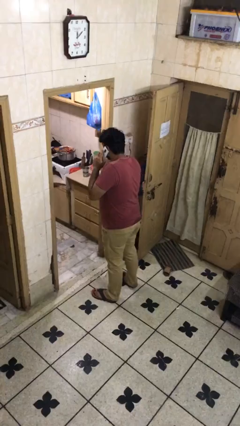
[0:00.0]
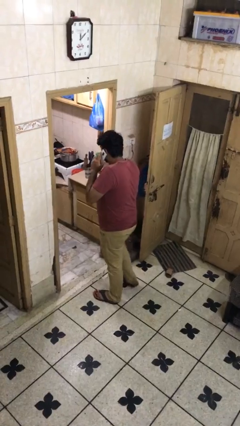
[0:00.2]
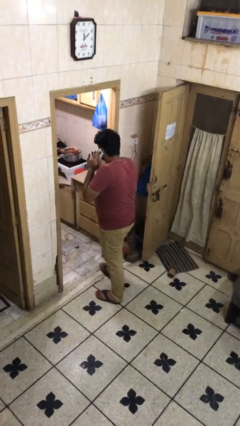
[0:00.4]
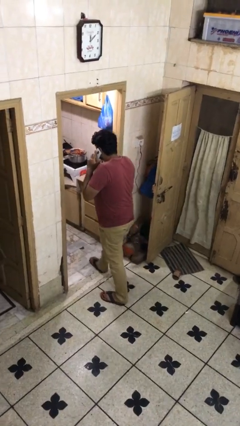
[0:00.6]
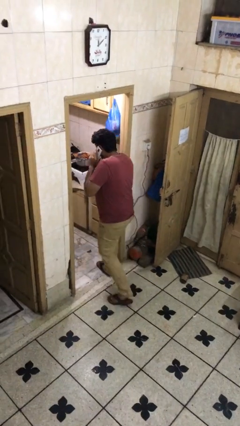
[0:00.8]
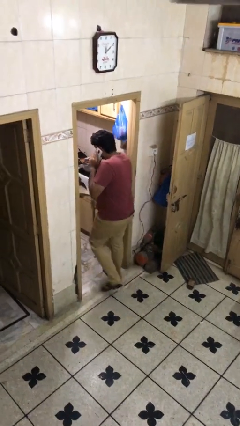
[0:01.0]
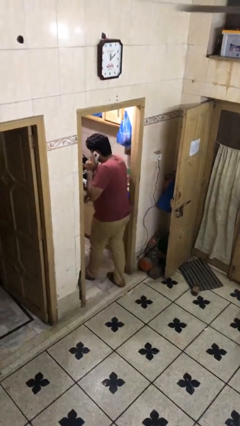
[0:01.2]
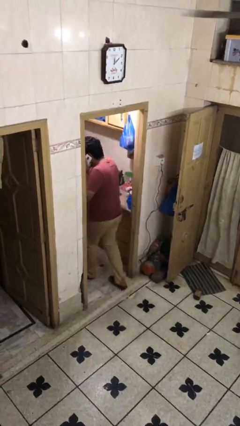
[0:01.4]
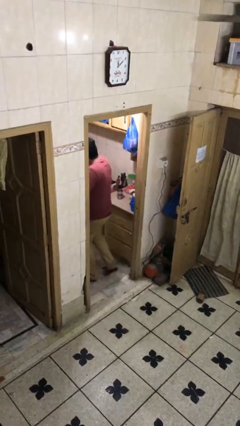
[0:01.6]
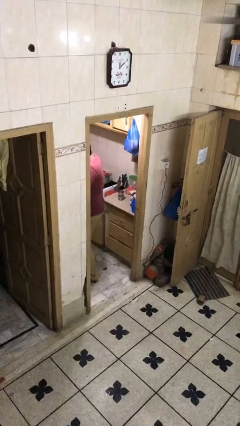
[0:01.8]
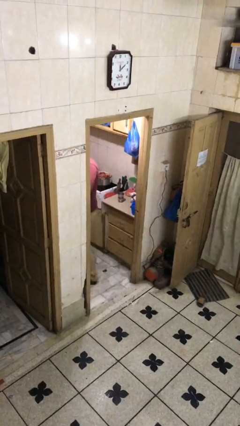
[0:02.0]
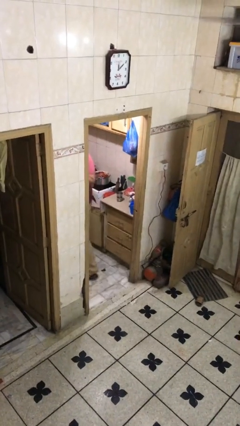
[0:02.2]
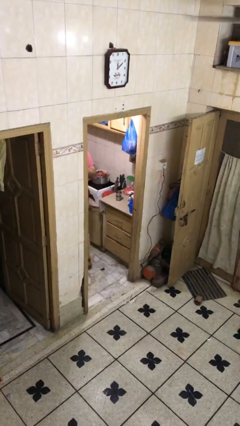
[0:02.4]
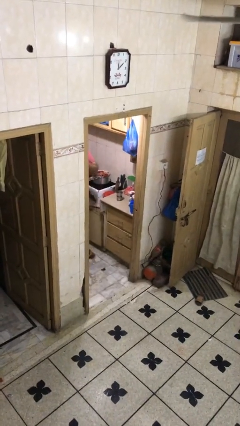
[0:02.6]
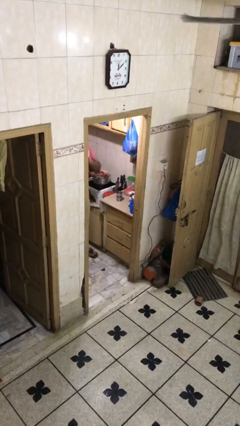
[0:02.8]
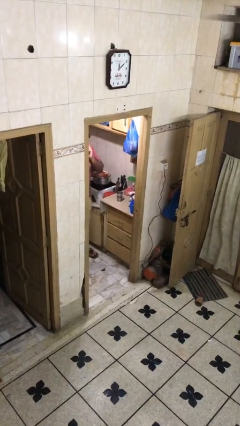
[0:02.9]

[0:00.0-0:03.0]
person exits scene through structure

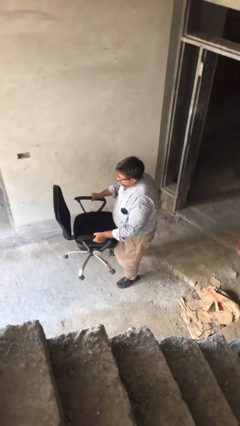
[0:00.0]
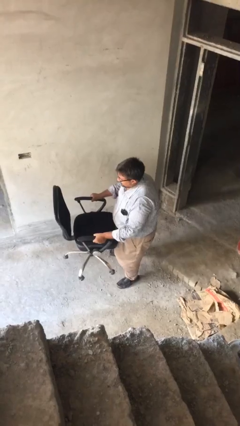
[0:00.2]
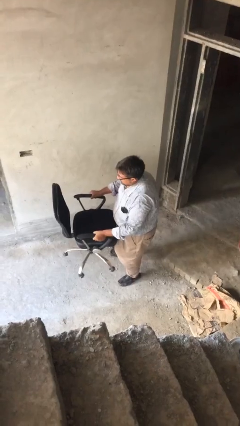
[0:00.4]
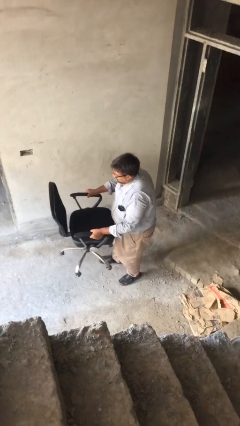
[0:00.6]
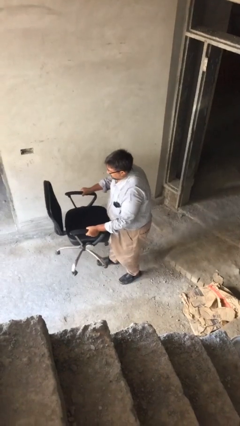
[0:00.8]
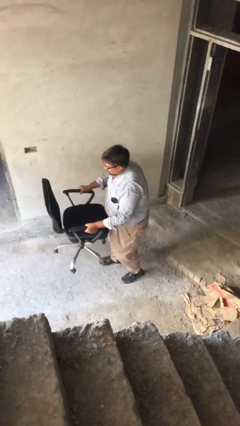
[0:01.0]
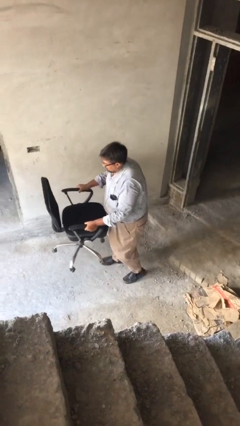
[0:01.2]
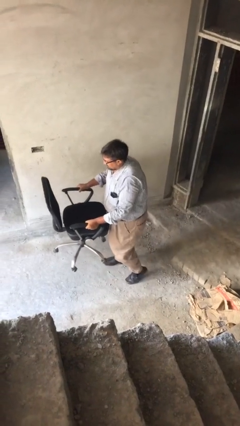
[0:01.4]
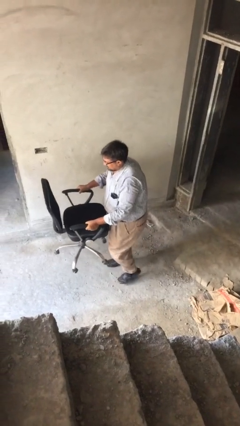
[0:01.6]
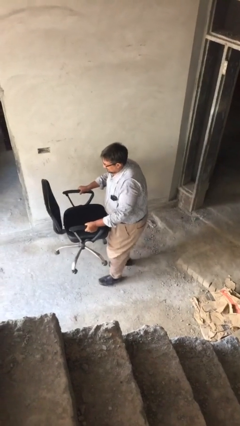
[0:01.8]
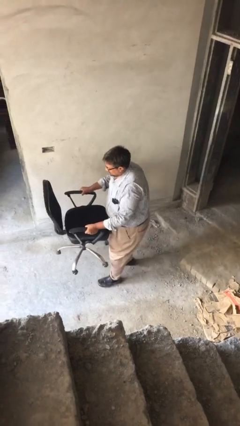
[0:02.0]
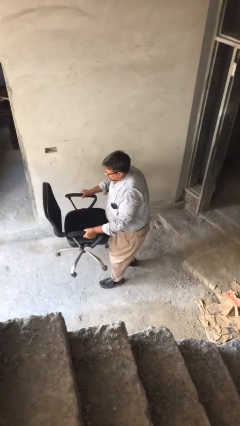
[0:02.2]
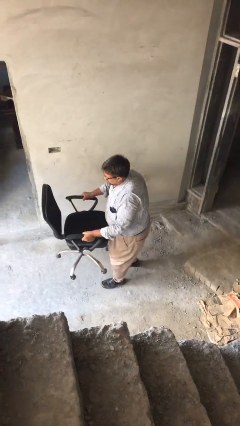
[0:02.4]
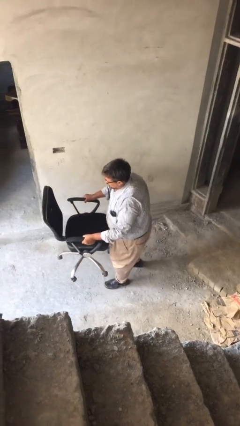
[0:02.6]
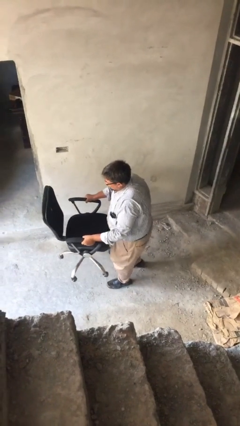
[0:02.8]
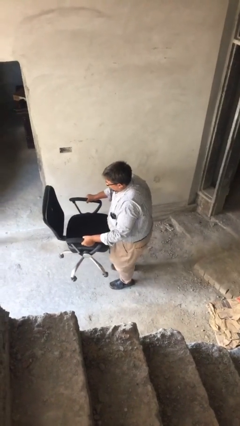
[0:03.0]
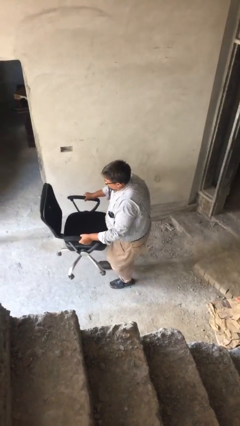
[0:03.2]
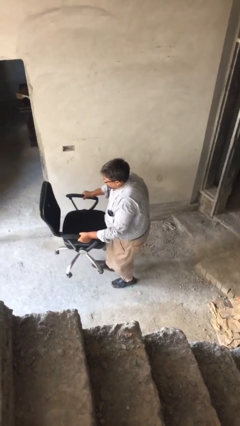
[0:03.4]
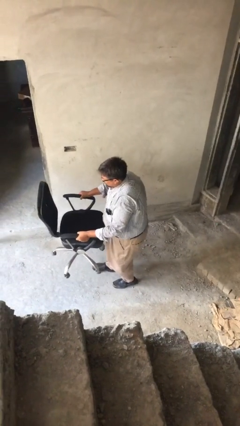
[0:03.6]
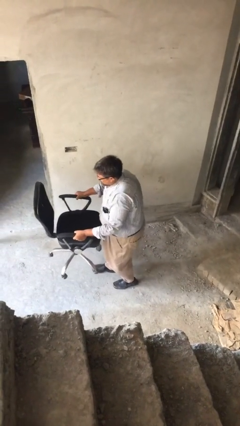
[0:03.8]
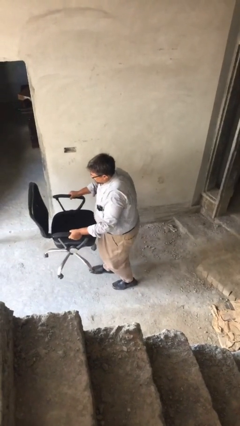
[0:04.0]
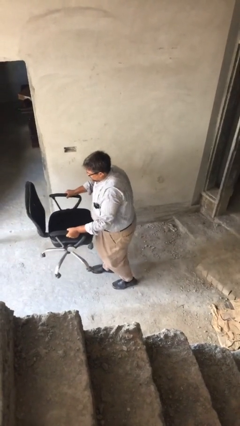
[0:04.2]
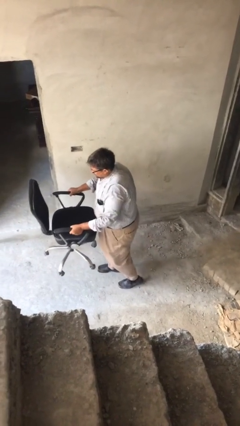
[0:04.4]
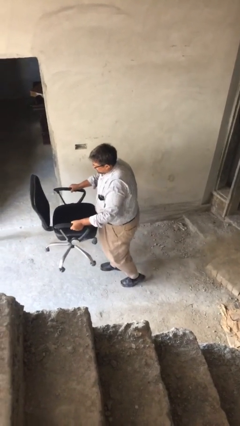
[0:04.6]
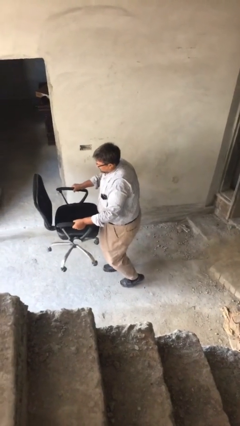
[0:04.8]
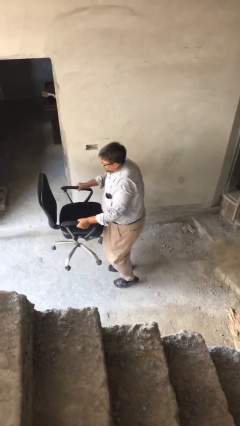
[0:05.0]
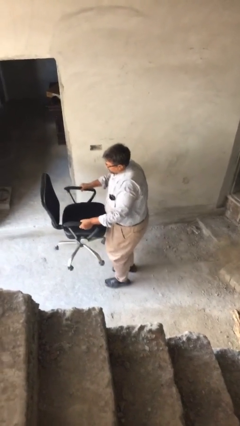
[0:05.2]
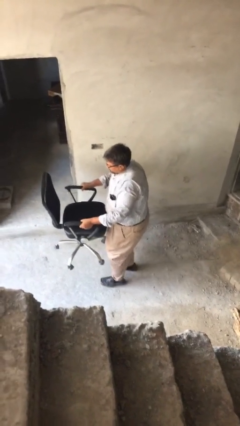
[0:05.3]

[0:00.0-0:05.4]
person carries heavy object

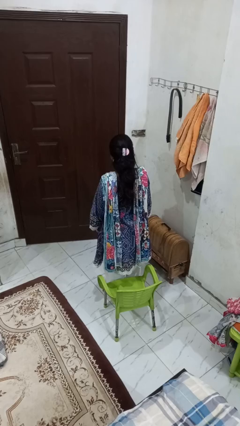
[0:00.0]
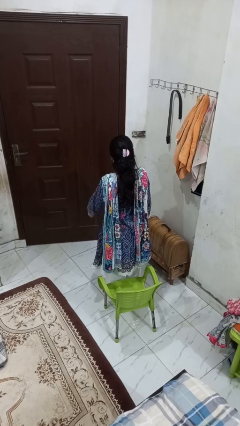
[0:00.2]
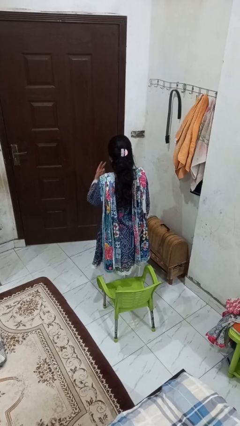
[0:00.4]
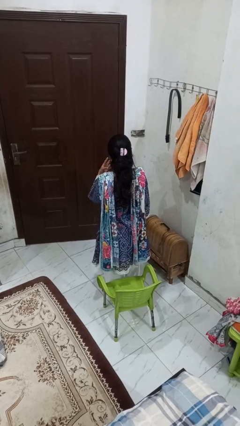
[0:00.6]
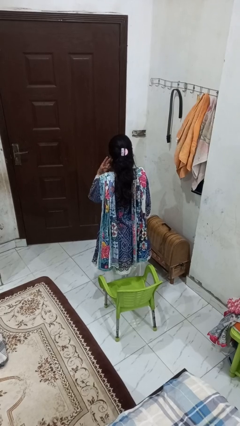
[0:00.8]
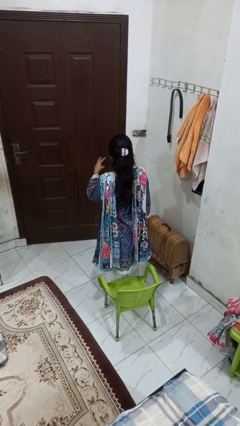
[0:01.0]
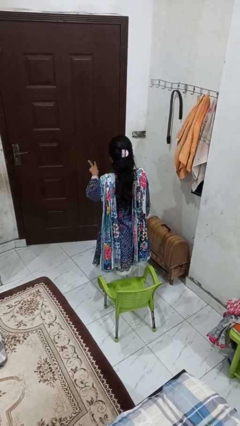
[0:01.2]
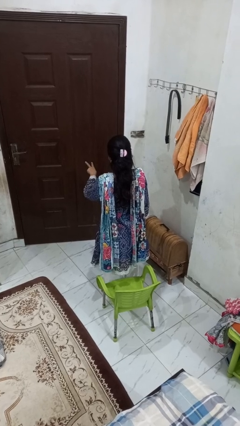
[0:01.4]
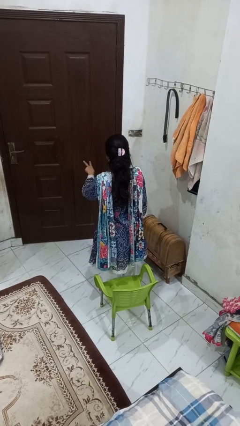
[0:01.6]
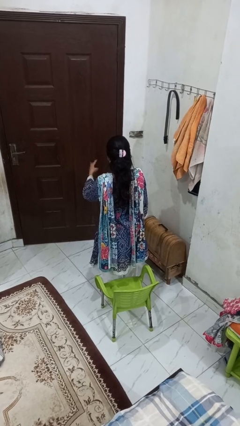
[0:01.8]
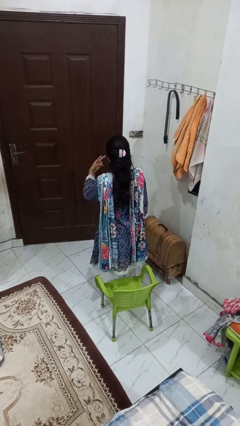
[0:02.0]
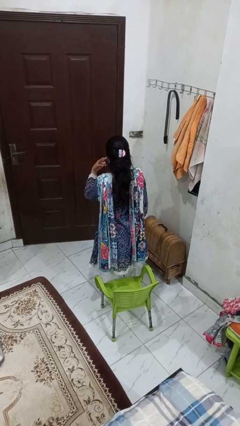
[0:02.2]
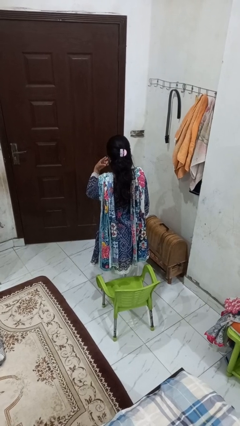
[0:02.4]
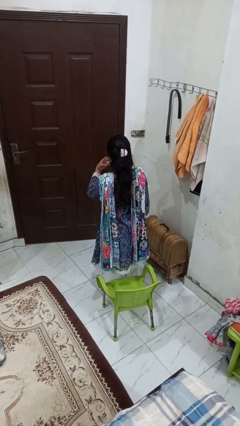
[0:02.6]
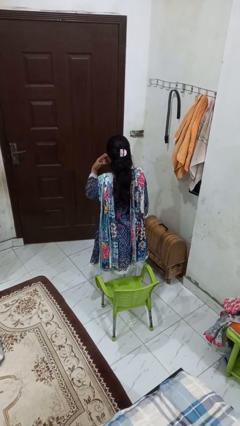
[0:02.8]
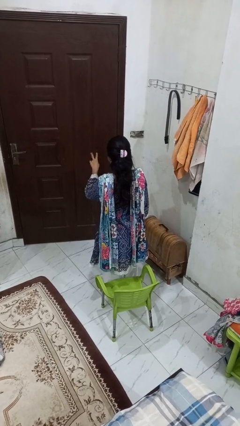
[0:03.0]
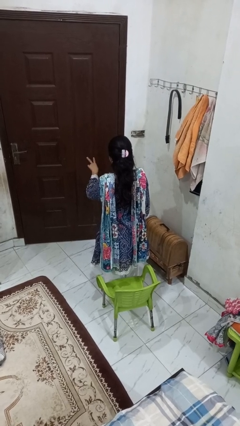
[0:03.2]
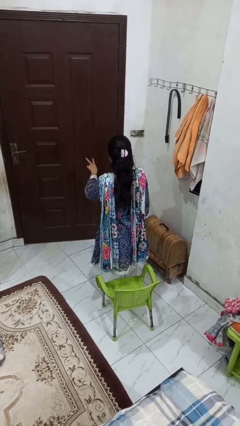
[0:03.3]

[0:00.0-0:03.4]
person gestures watch closely

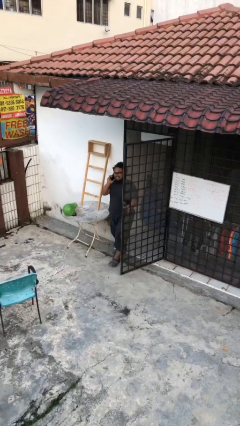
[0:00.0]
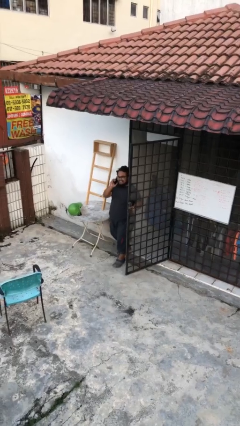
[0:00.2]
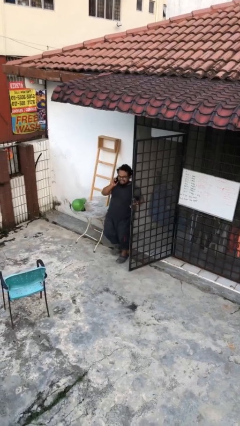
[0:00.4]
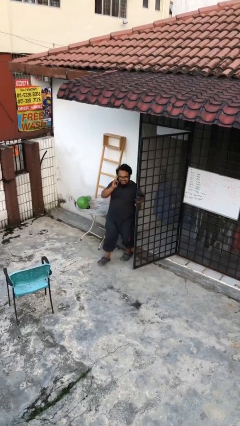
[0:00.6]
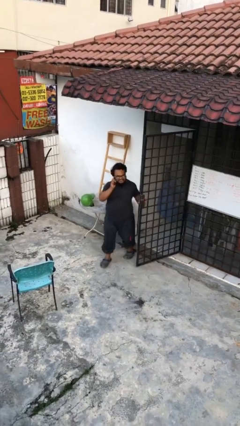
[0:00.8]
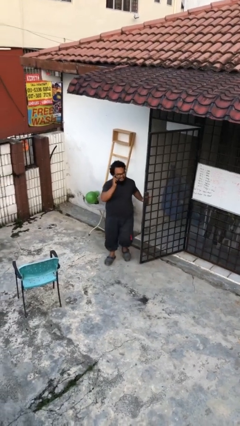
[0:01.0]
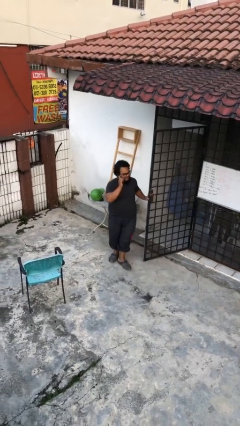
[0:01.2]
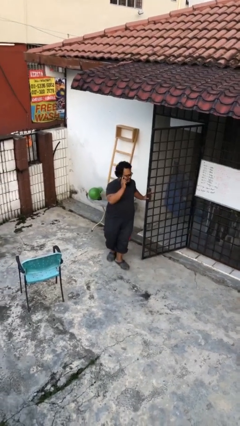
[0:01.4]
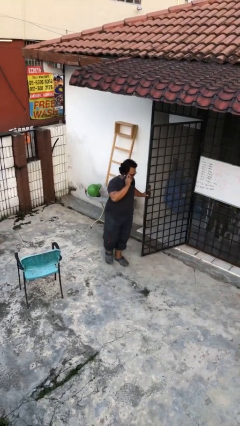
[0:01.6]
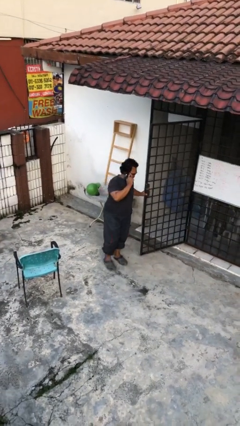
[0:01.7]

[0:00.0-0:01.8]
person enters scene through structure

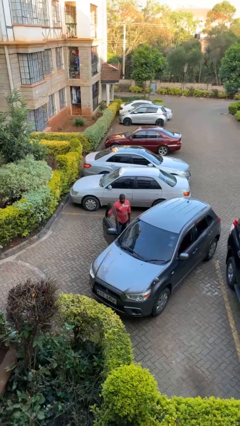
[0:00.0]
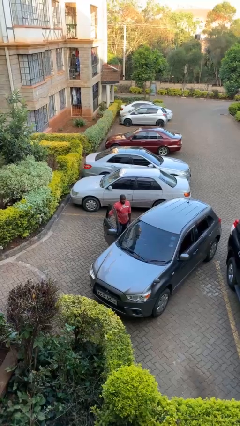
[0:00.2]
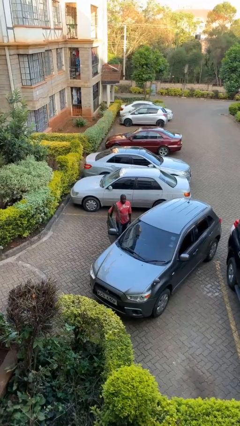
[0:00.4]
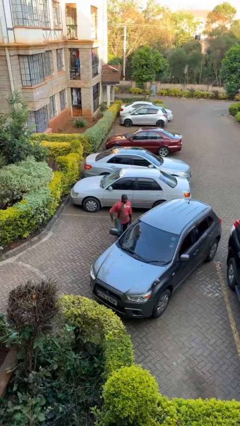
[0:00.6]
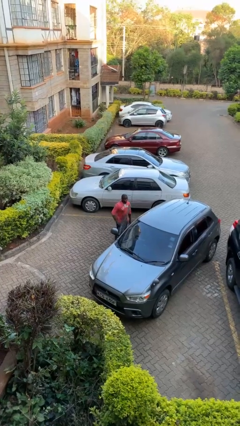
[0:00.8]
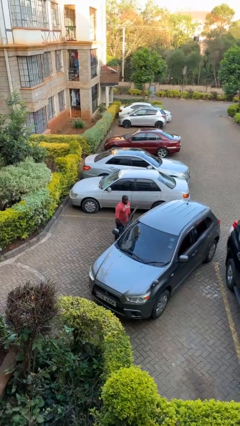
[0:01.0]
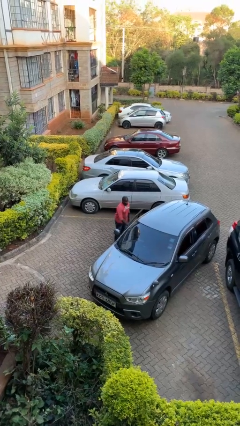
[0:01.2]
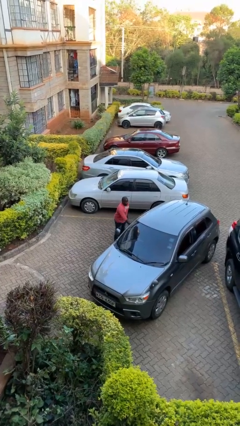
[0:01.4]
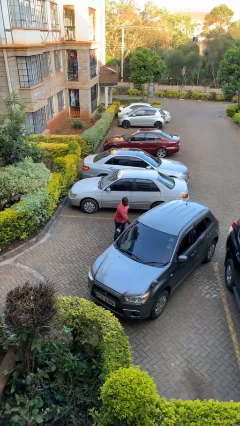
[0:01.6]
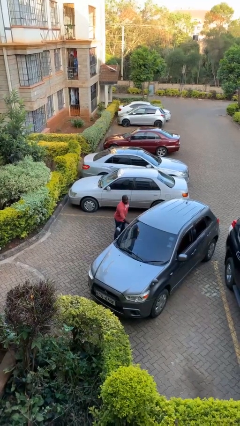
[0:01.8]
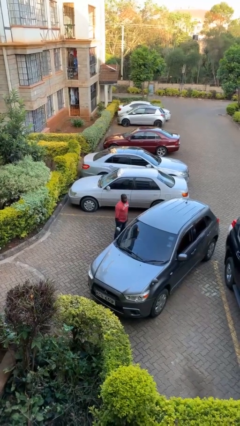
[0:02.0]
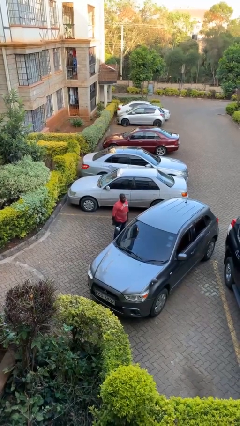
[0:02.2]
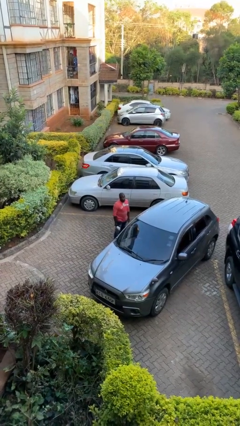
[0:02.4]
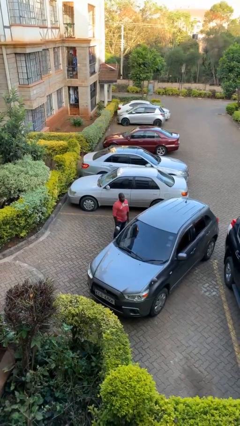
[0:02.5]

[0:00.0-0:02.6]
person closes car door

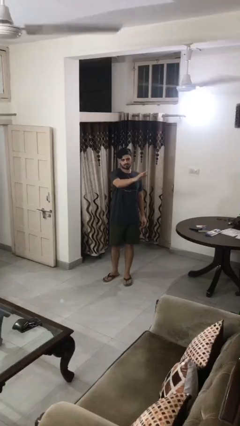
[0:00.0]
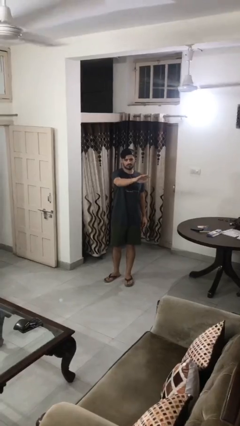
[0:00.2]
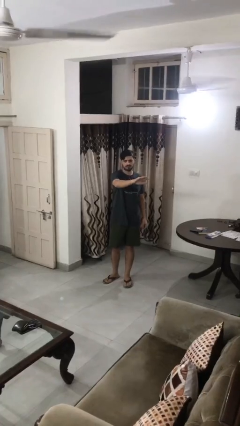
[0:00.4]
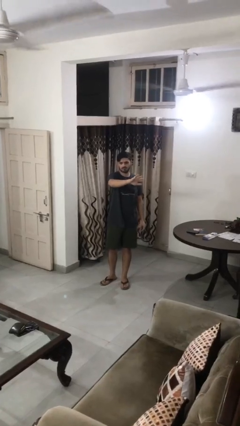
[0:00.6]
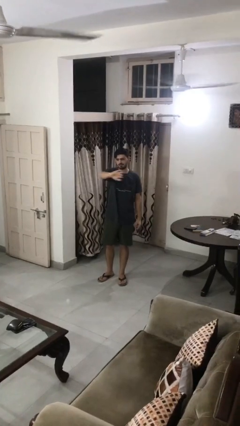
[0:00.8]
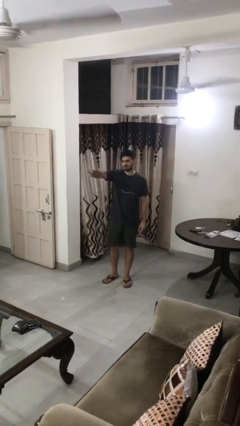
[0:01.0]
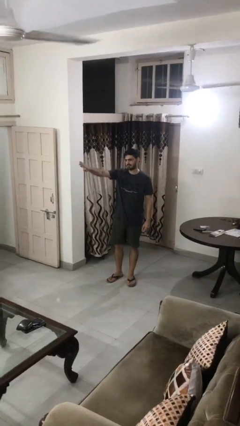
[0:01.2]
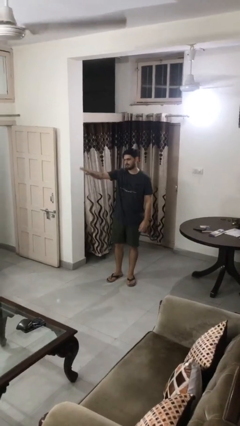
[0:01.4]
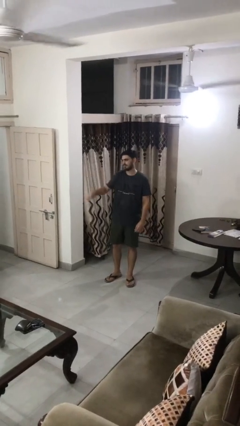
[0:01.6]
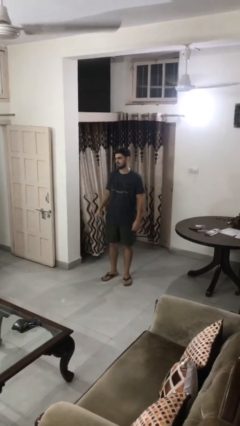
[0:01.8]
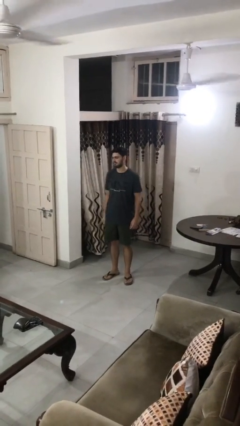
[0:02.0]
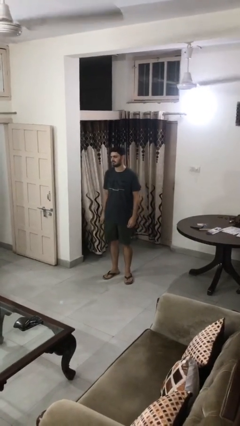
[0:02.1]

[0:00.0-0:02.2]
person gestures swipe right
